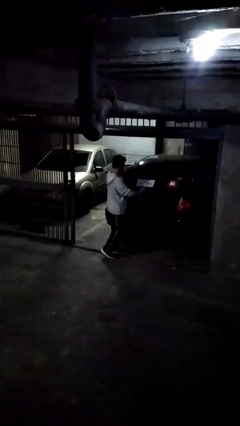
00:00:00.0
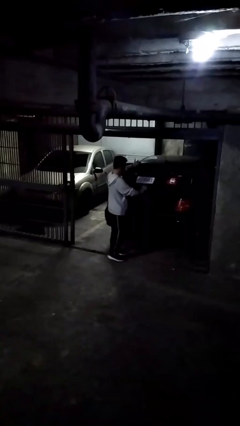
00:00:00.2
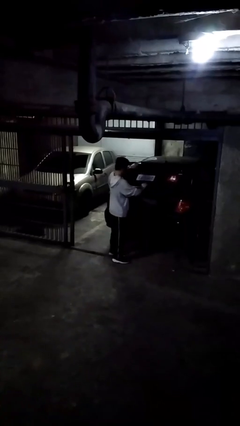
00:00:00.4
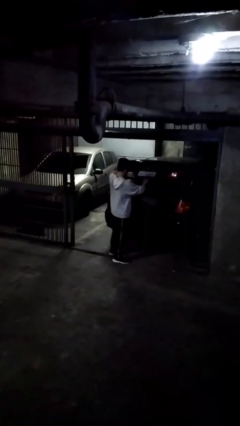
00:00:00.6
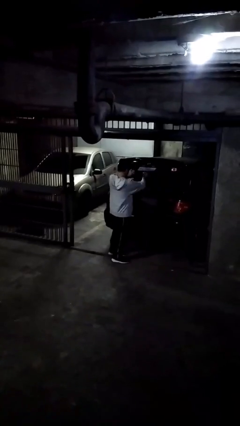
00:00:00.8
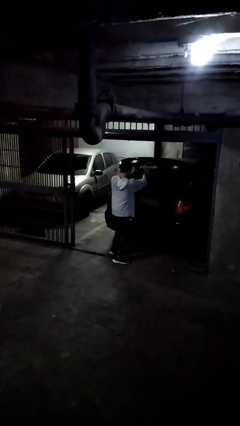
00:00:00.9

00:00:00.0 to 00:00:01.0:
person opens car trunk

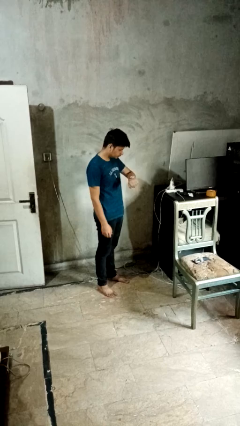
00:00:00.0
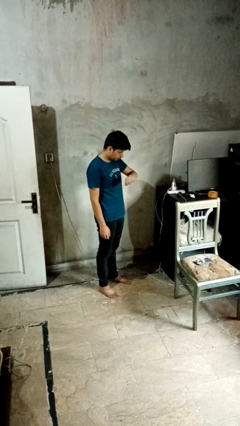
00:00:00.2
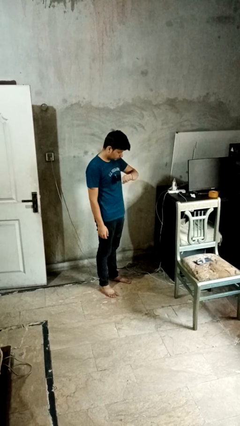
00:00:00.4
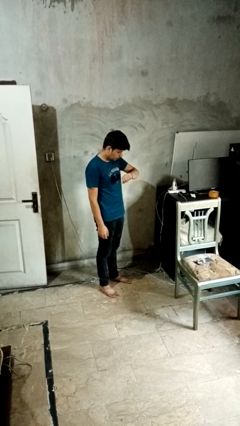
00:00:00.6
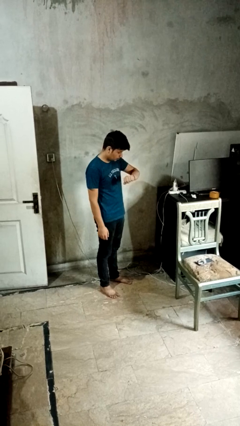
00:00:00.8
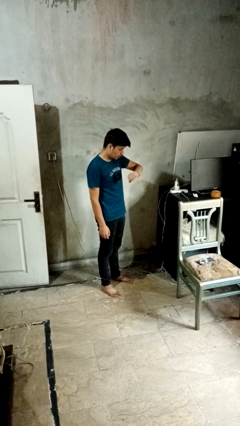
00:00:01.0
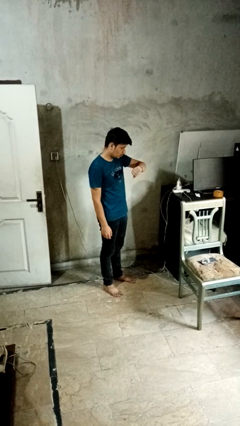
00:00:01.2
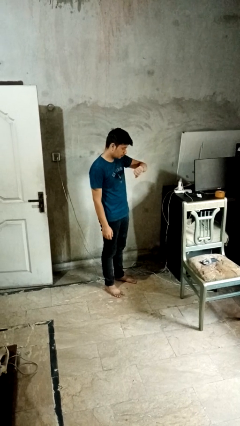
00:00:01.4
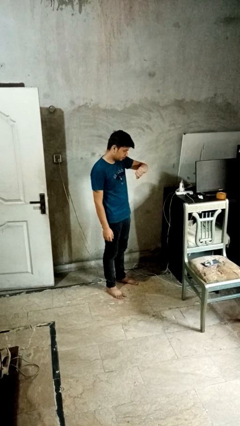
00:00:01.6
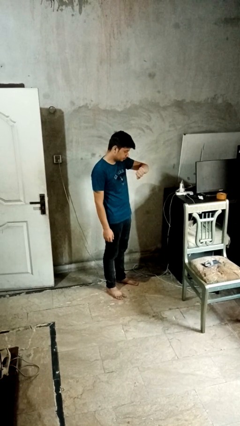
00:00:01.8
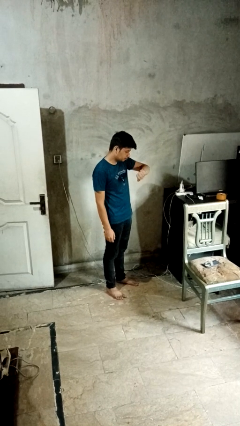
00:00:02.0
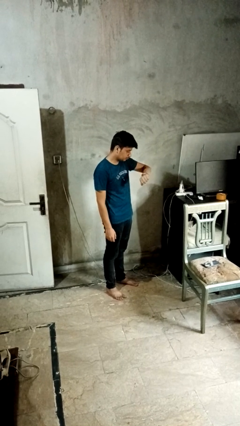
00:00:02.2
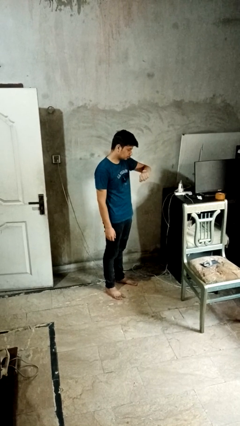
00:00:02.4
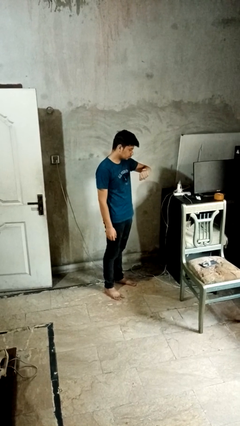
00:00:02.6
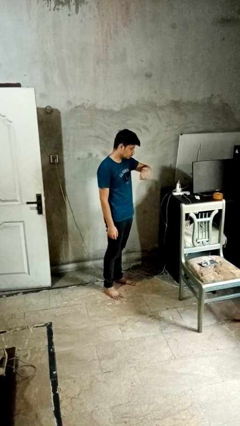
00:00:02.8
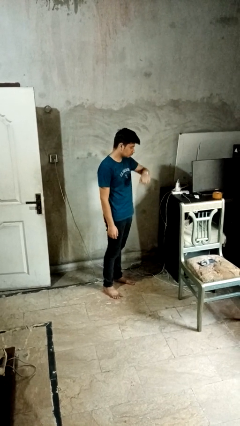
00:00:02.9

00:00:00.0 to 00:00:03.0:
person looks at wristwatch

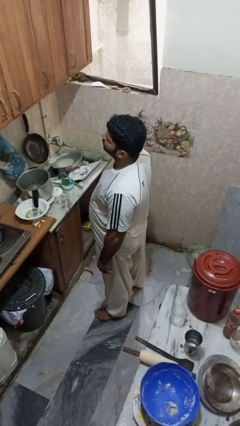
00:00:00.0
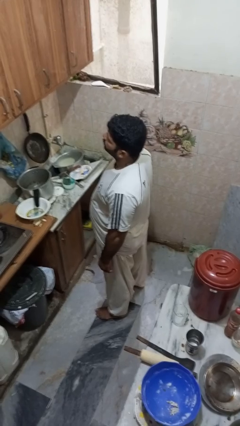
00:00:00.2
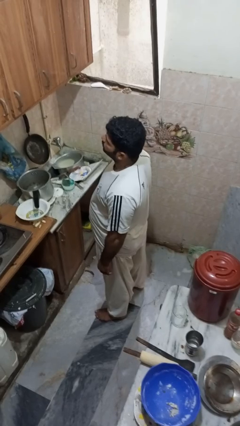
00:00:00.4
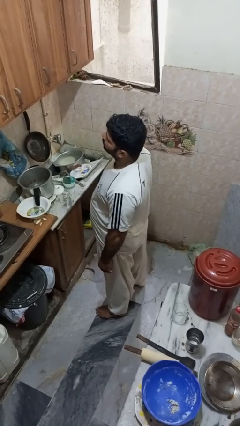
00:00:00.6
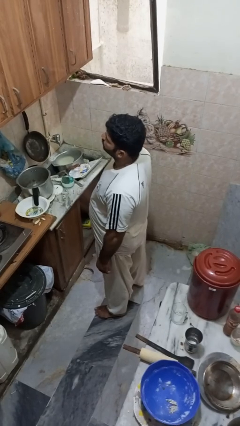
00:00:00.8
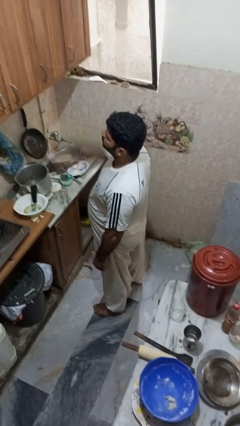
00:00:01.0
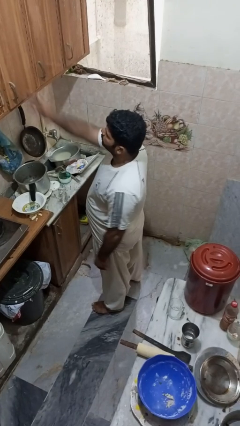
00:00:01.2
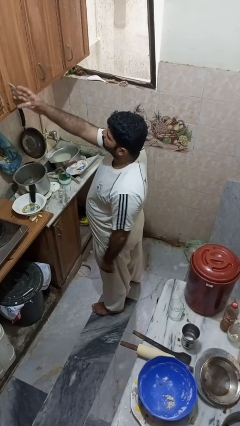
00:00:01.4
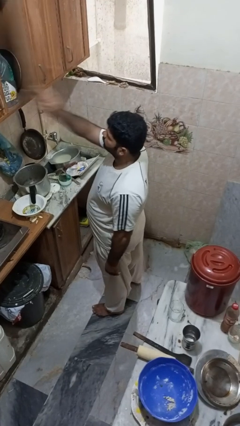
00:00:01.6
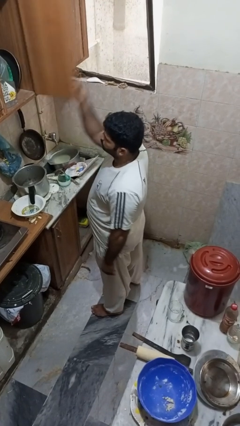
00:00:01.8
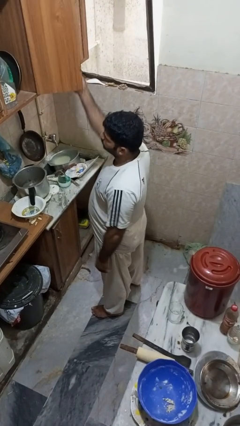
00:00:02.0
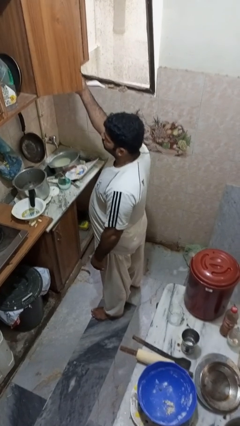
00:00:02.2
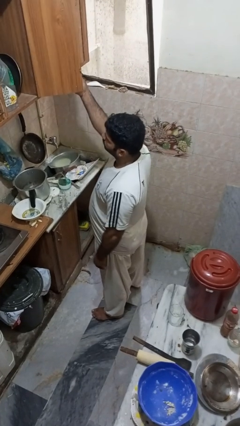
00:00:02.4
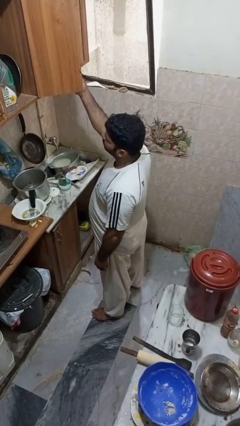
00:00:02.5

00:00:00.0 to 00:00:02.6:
person opens cabinet

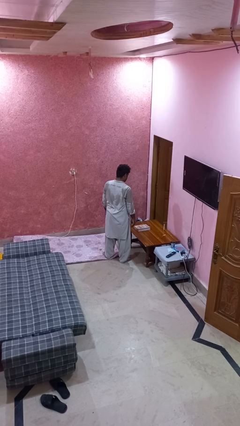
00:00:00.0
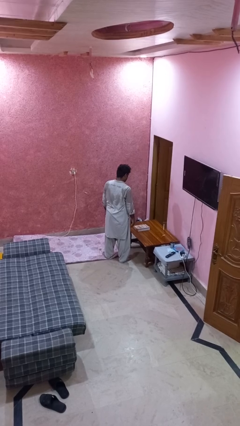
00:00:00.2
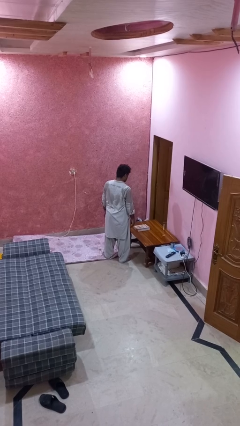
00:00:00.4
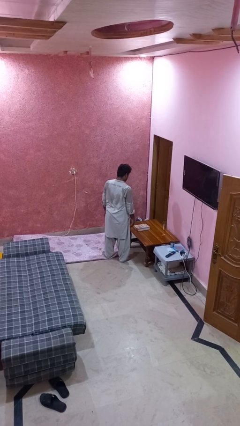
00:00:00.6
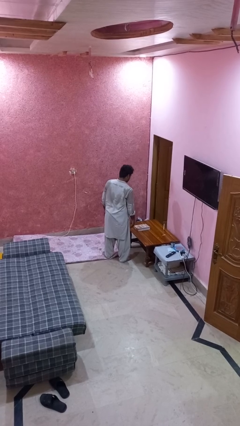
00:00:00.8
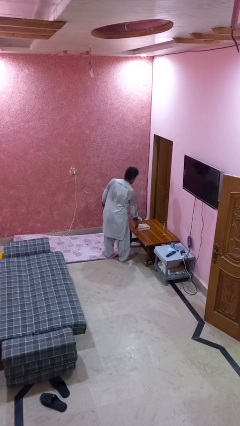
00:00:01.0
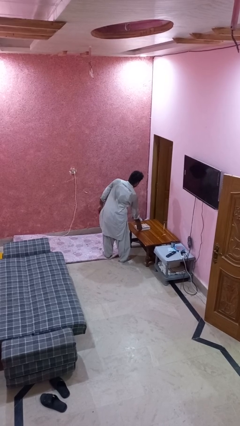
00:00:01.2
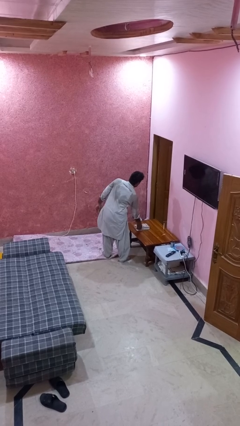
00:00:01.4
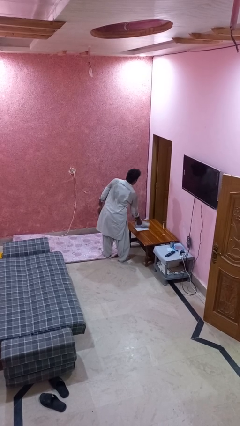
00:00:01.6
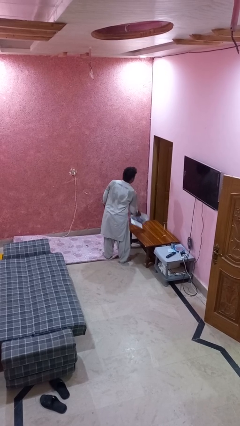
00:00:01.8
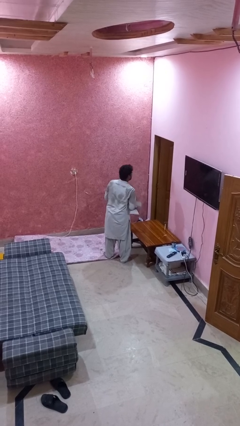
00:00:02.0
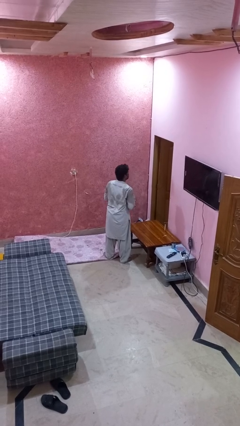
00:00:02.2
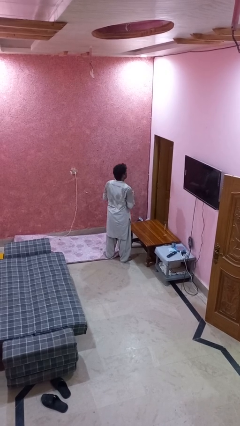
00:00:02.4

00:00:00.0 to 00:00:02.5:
person picks up object from table

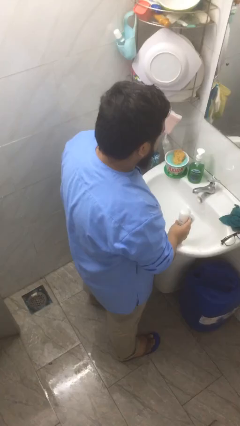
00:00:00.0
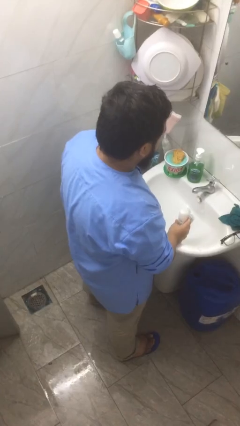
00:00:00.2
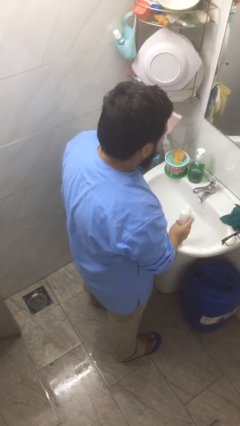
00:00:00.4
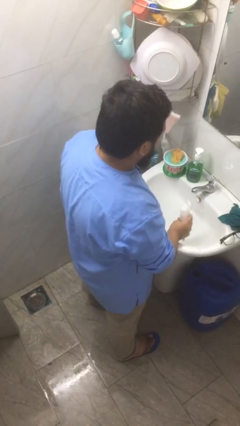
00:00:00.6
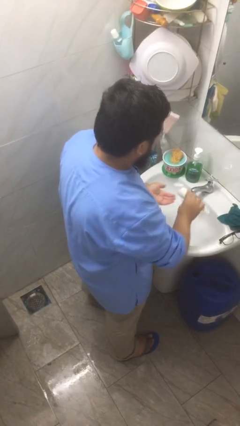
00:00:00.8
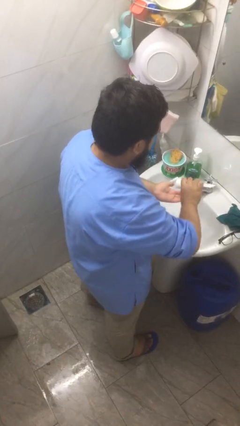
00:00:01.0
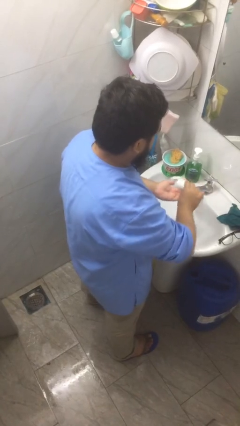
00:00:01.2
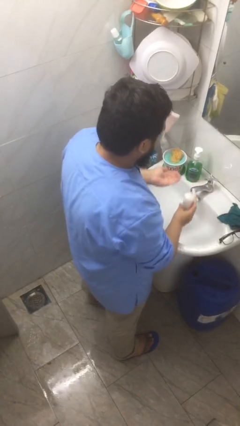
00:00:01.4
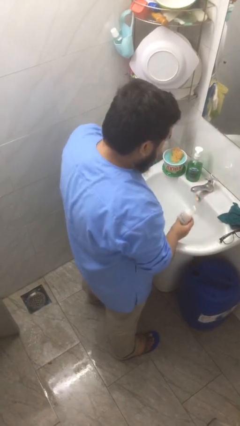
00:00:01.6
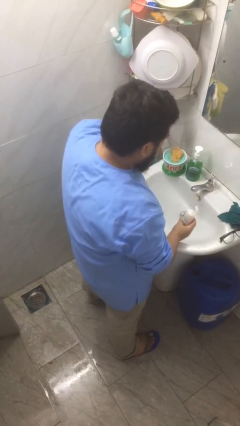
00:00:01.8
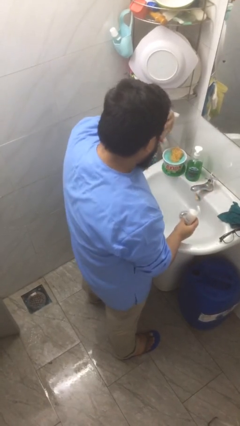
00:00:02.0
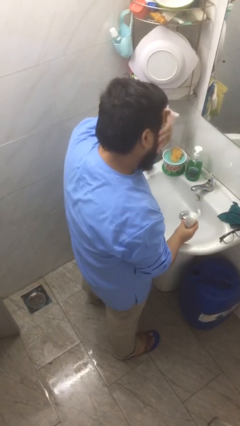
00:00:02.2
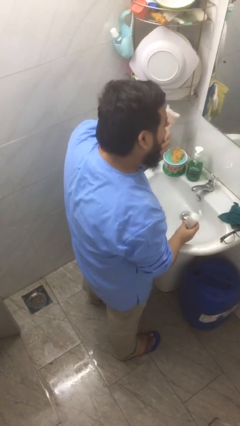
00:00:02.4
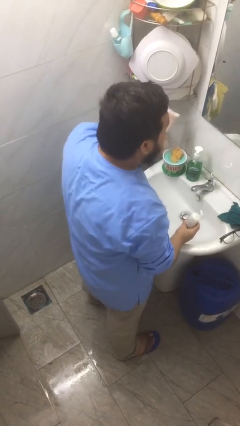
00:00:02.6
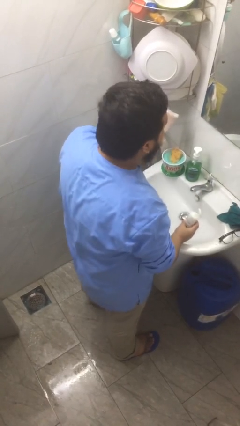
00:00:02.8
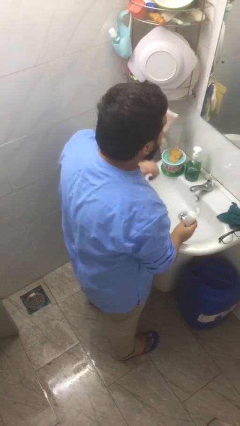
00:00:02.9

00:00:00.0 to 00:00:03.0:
person applies facial moisturizer

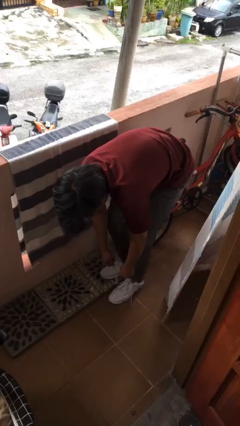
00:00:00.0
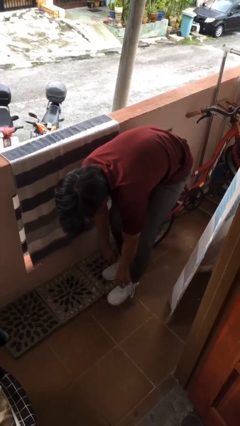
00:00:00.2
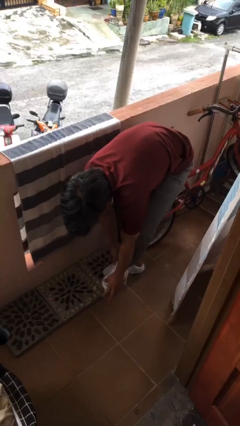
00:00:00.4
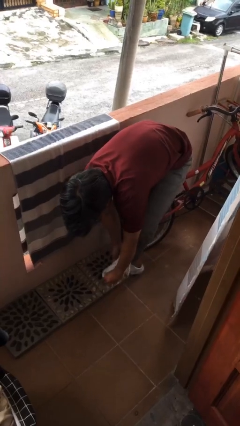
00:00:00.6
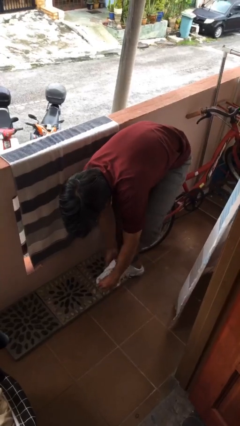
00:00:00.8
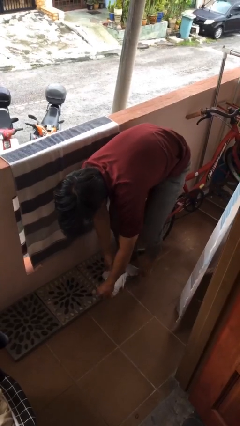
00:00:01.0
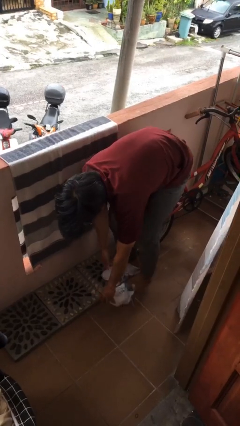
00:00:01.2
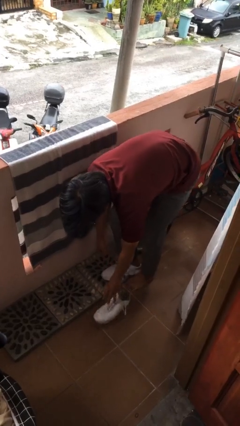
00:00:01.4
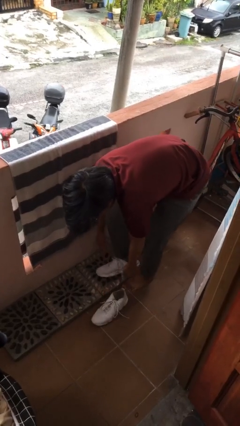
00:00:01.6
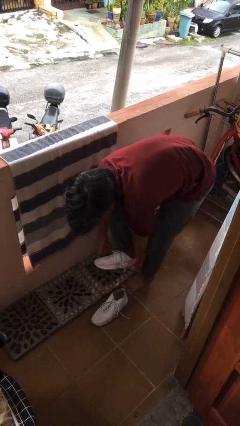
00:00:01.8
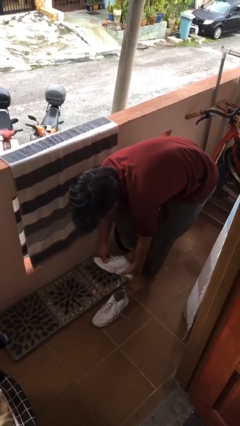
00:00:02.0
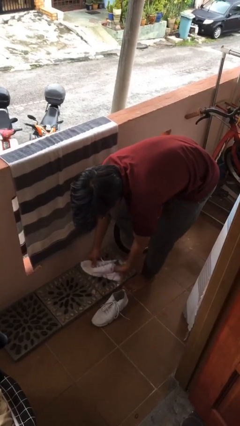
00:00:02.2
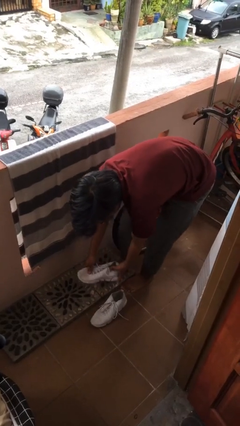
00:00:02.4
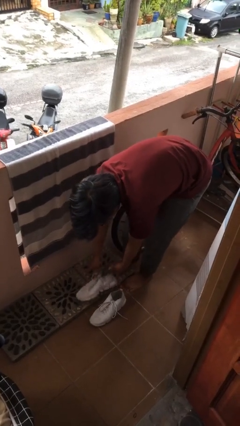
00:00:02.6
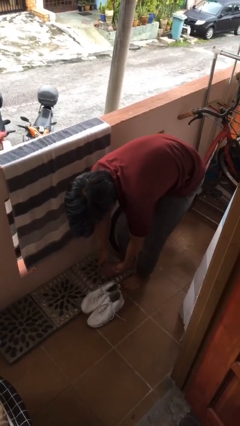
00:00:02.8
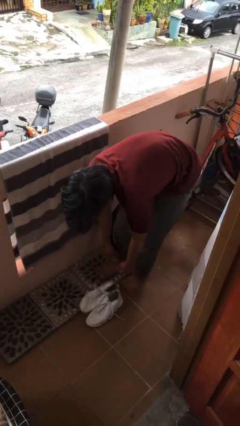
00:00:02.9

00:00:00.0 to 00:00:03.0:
person takes off shoes

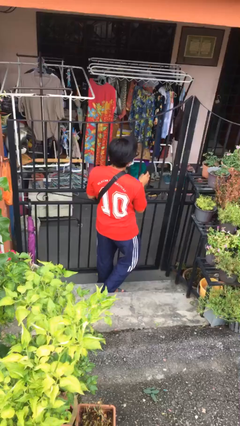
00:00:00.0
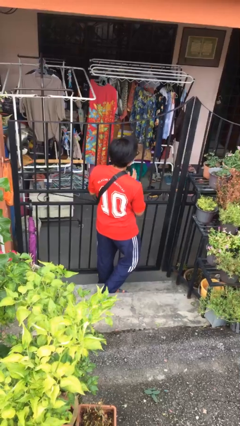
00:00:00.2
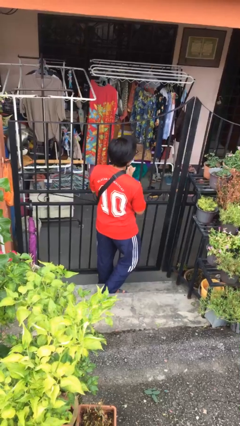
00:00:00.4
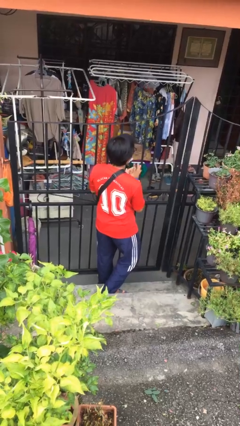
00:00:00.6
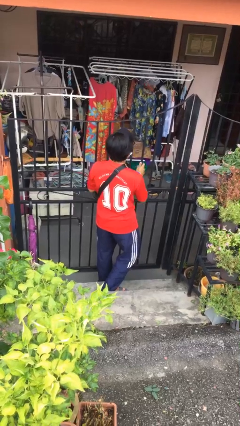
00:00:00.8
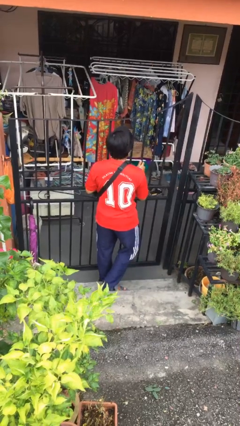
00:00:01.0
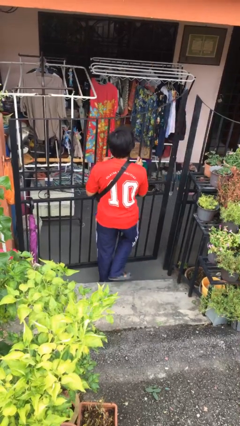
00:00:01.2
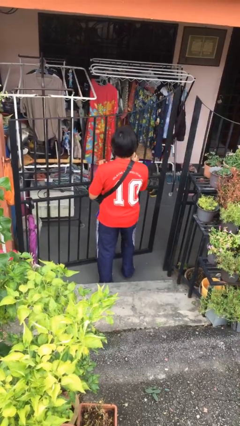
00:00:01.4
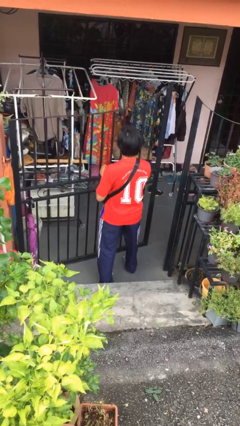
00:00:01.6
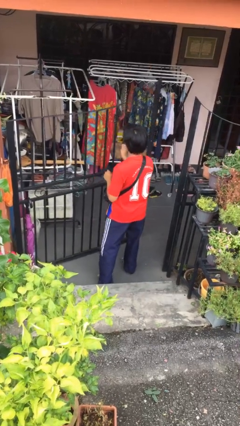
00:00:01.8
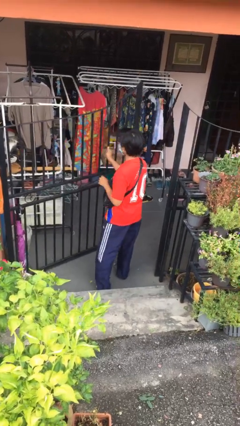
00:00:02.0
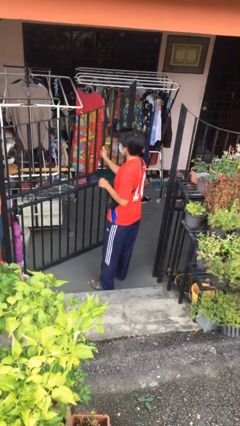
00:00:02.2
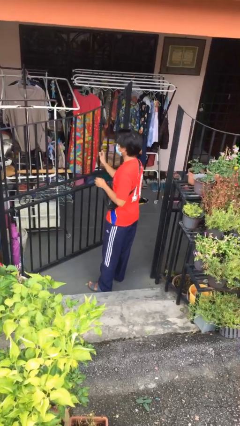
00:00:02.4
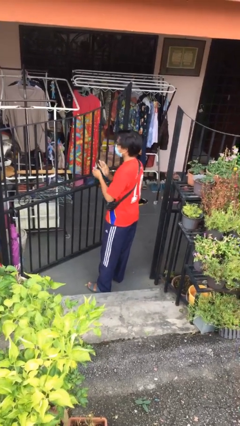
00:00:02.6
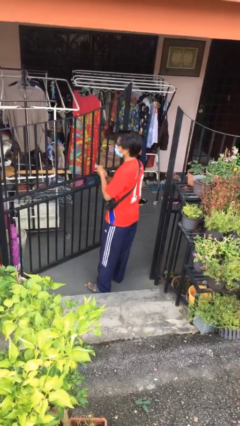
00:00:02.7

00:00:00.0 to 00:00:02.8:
person opens facility door
